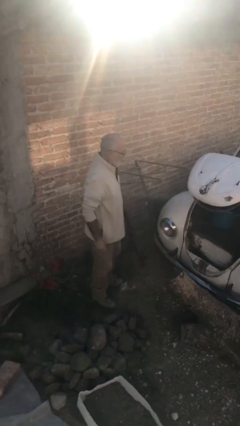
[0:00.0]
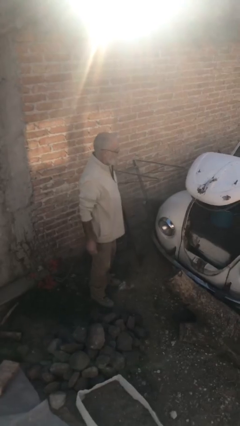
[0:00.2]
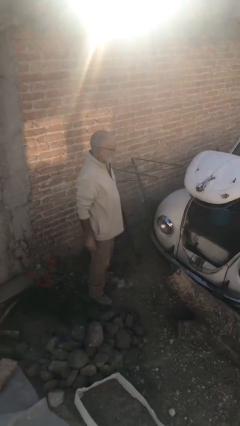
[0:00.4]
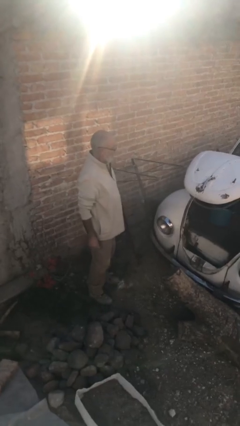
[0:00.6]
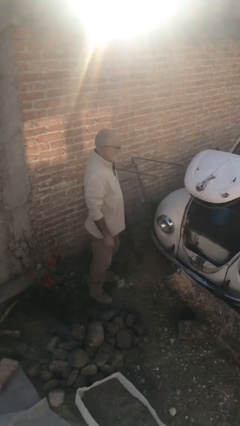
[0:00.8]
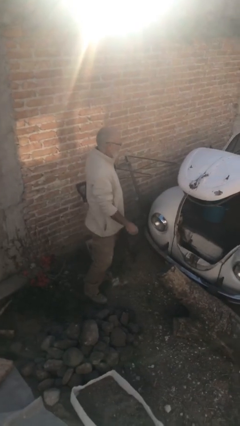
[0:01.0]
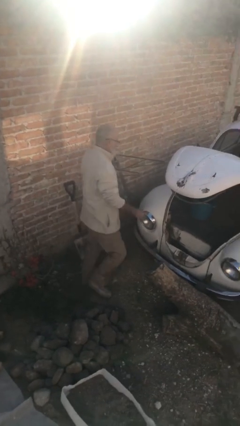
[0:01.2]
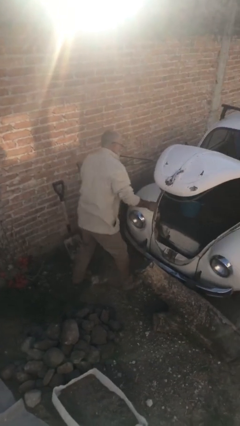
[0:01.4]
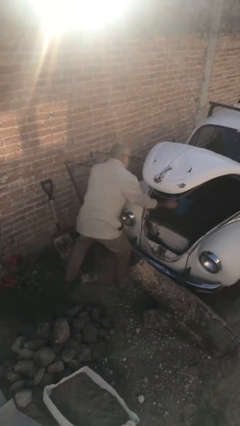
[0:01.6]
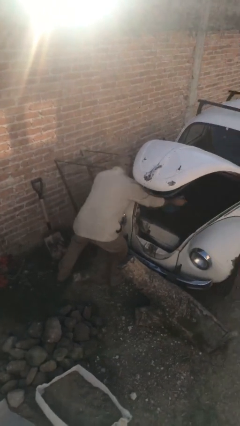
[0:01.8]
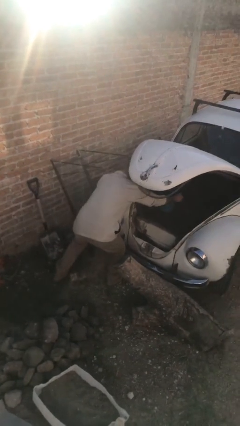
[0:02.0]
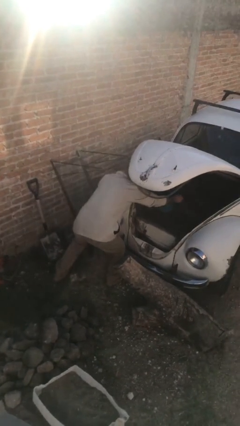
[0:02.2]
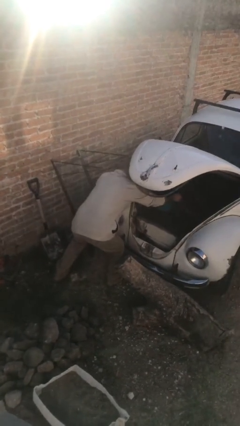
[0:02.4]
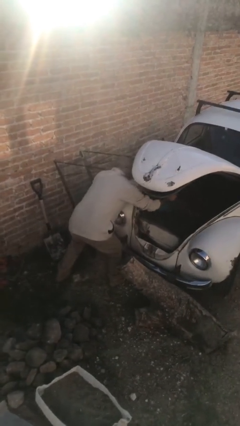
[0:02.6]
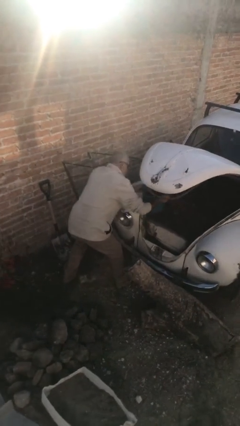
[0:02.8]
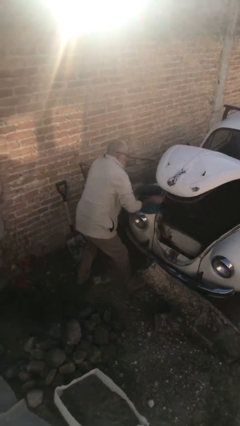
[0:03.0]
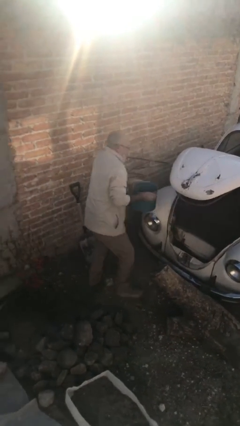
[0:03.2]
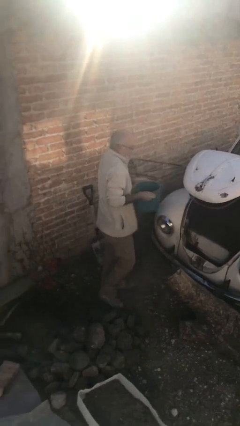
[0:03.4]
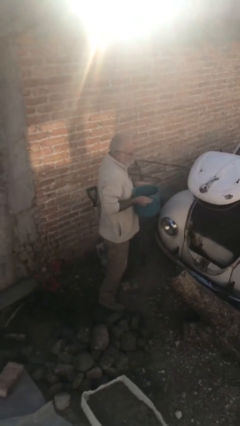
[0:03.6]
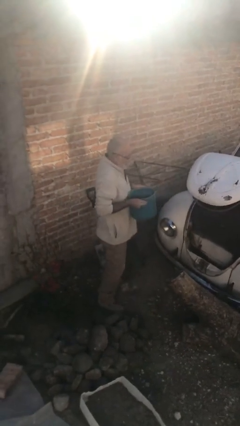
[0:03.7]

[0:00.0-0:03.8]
person unloads car

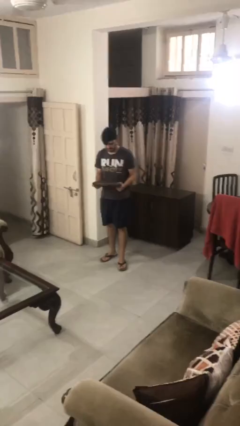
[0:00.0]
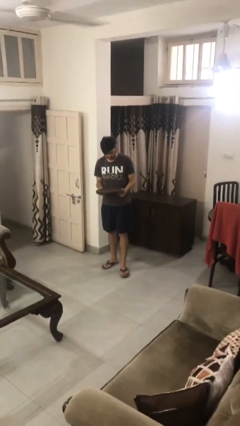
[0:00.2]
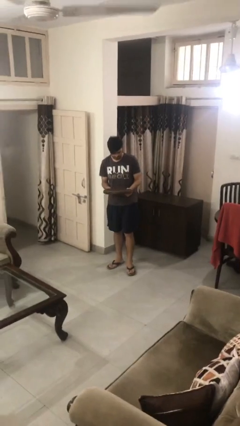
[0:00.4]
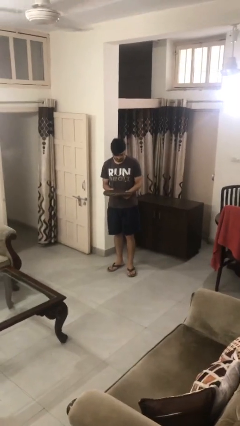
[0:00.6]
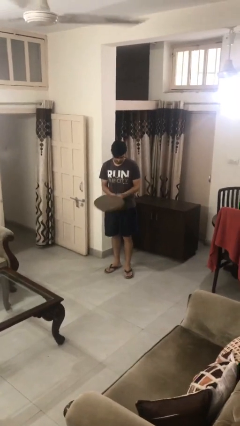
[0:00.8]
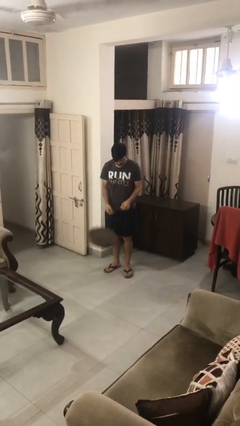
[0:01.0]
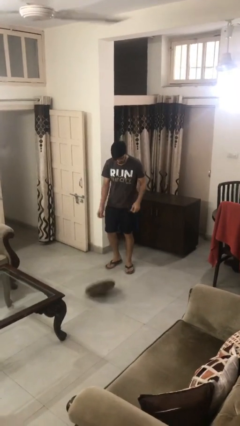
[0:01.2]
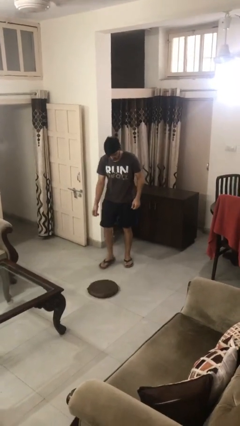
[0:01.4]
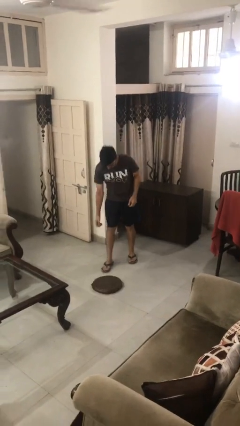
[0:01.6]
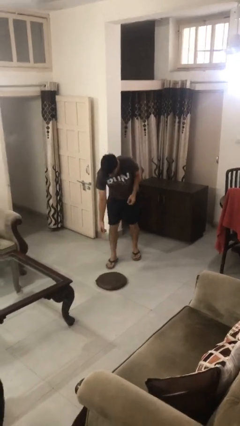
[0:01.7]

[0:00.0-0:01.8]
person drops object

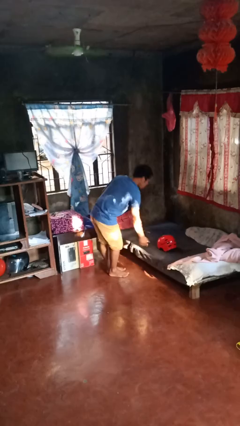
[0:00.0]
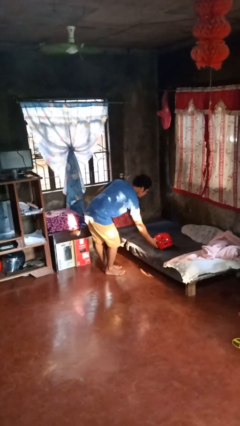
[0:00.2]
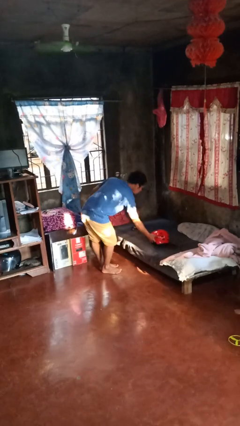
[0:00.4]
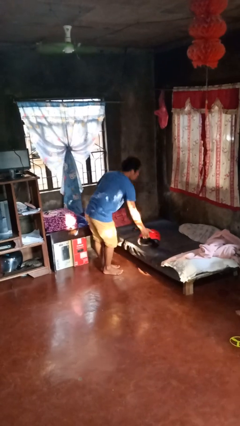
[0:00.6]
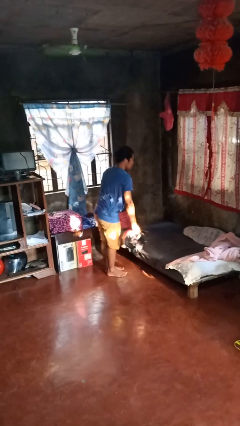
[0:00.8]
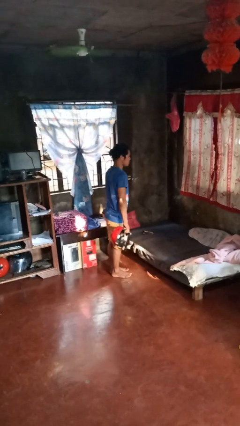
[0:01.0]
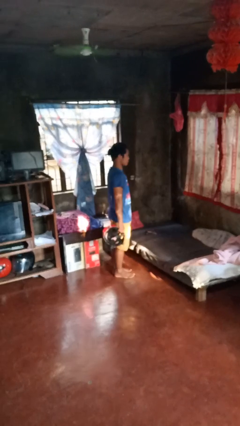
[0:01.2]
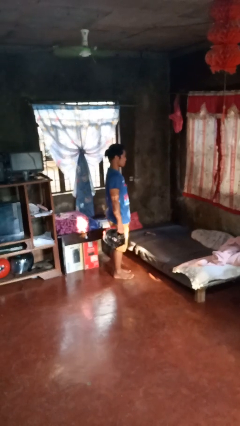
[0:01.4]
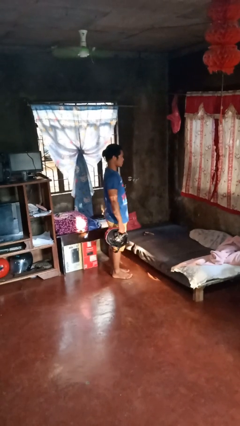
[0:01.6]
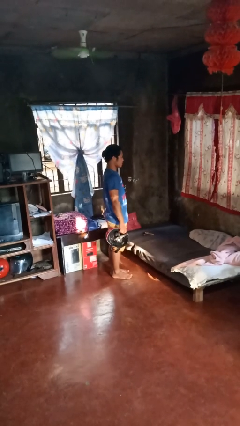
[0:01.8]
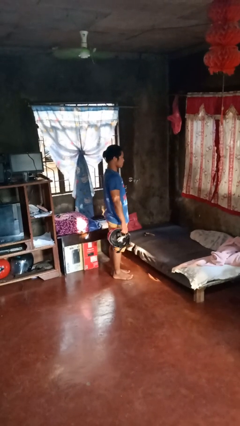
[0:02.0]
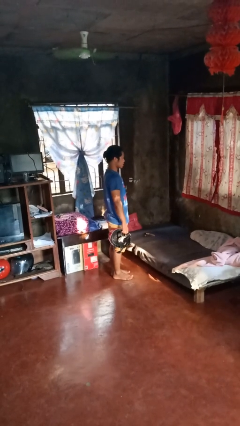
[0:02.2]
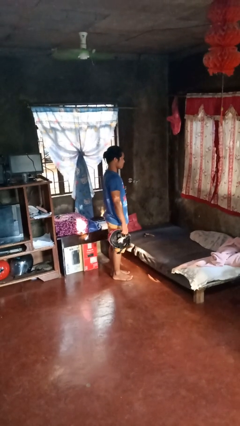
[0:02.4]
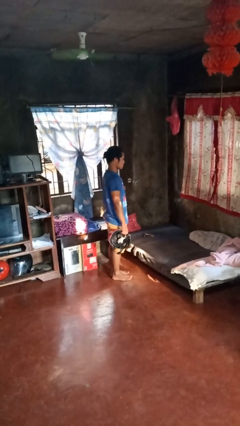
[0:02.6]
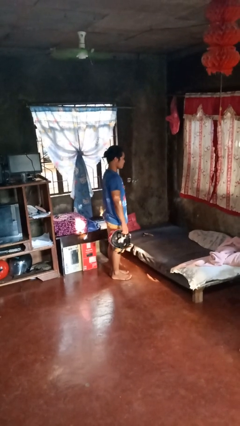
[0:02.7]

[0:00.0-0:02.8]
person picks up object from bed

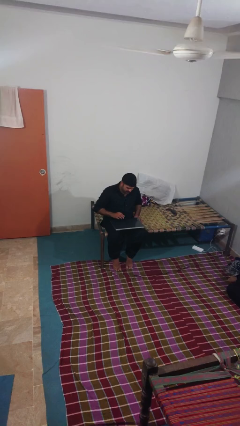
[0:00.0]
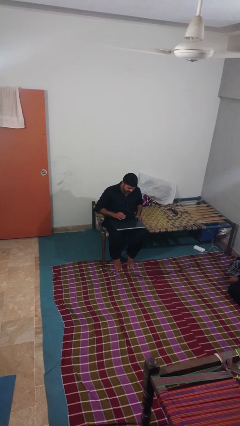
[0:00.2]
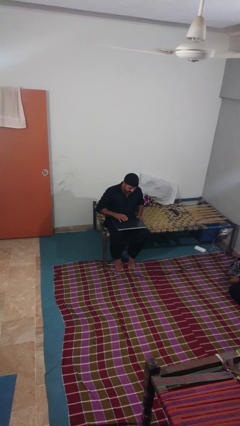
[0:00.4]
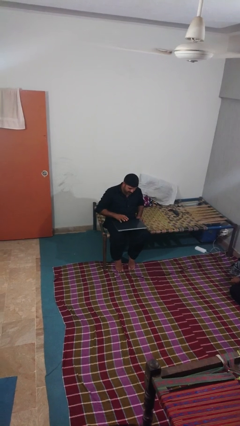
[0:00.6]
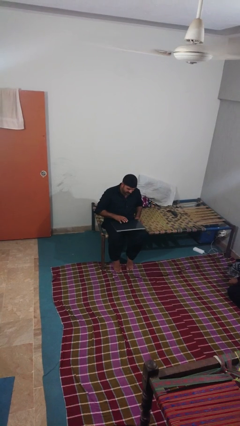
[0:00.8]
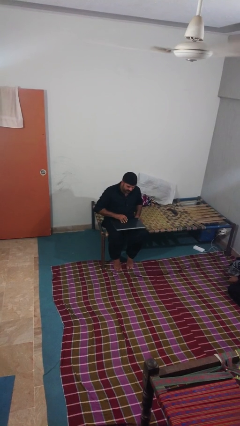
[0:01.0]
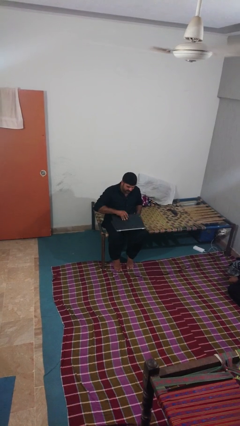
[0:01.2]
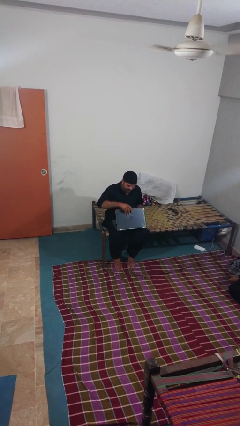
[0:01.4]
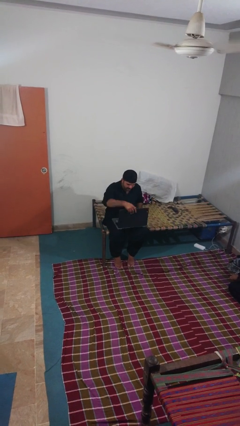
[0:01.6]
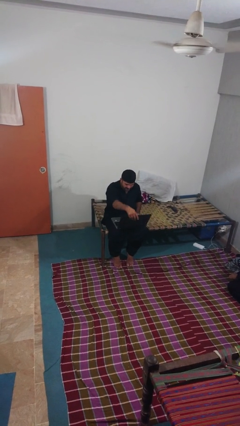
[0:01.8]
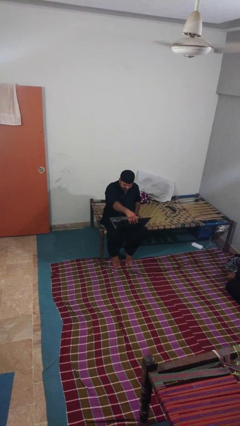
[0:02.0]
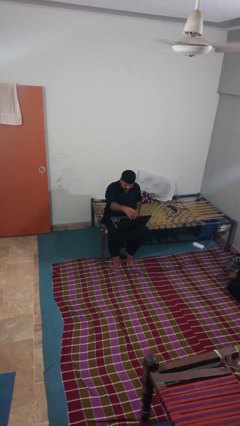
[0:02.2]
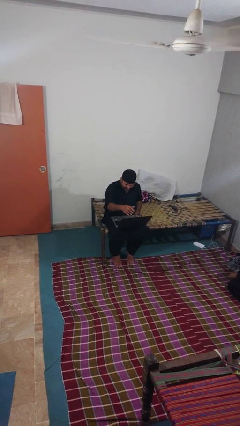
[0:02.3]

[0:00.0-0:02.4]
person opens laptop

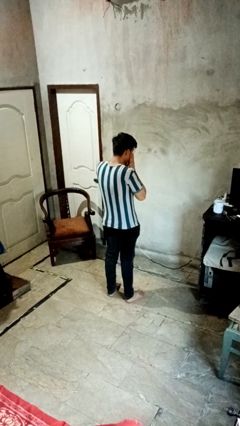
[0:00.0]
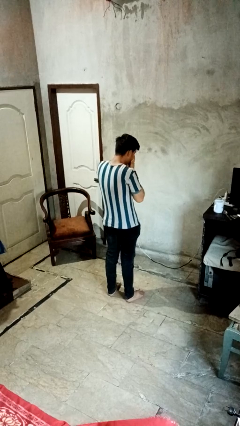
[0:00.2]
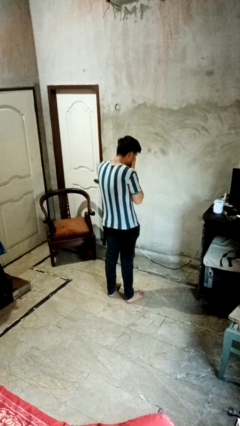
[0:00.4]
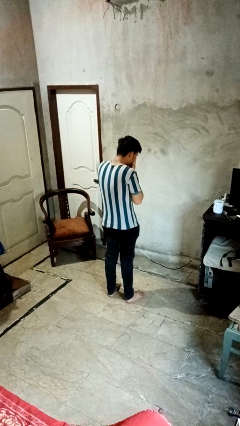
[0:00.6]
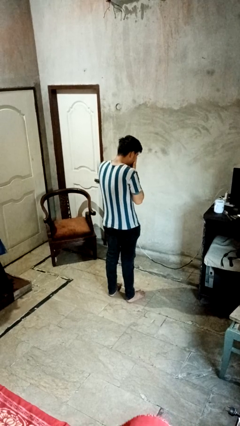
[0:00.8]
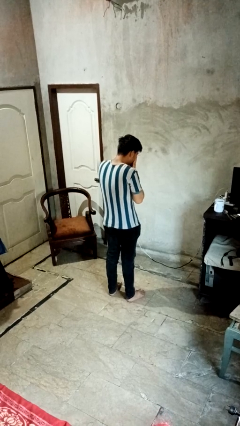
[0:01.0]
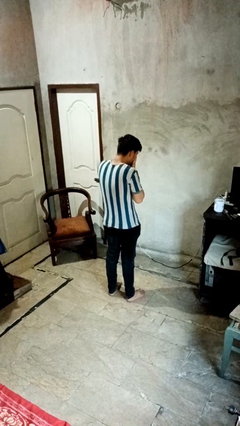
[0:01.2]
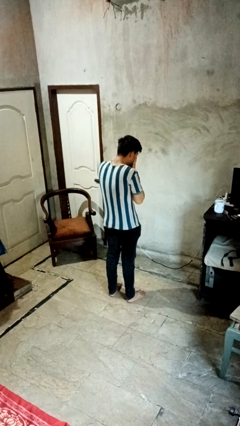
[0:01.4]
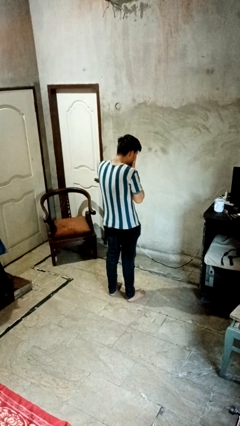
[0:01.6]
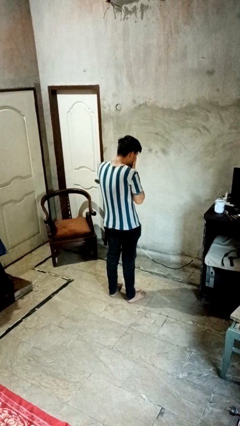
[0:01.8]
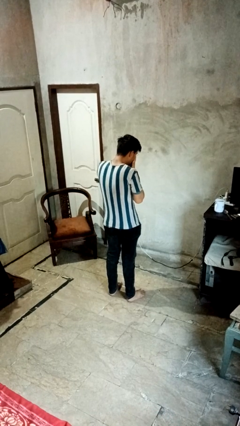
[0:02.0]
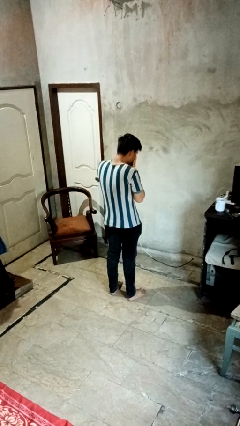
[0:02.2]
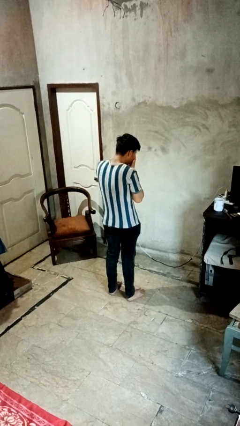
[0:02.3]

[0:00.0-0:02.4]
person blows nose

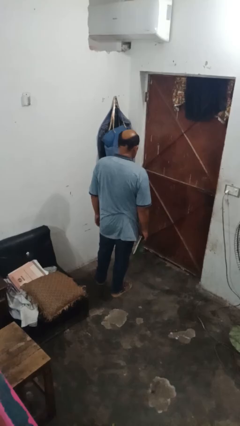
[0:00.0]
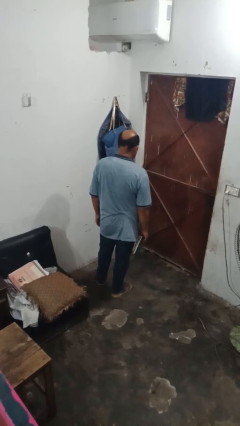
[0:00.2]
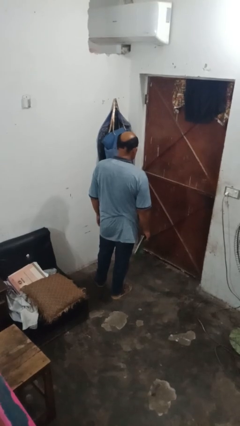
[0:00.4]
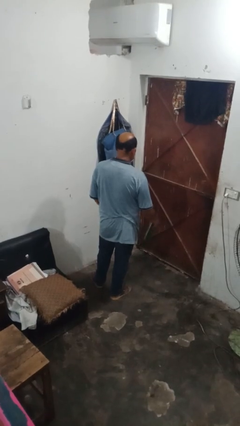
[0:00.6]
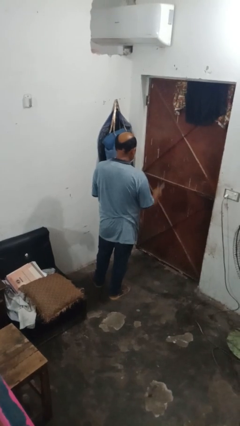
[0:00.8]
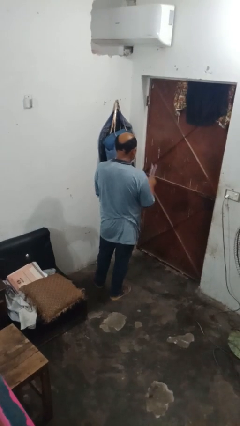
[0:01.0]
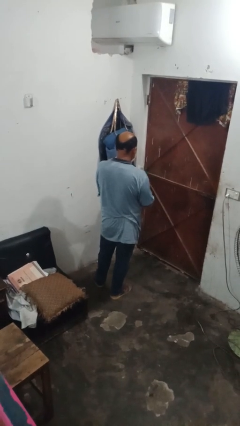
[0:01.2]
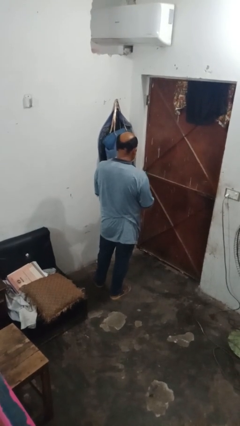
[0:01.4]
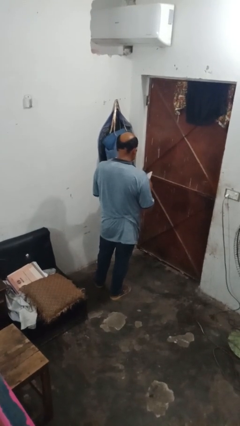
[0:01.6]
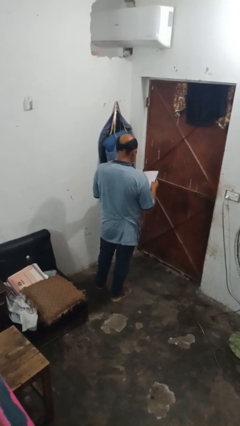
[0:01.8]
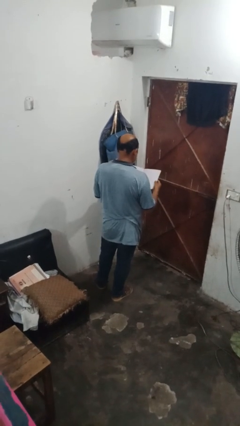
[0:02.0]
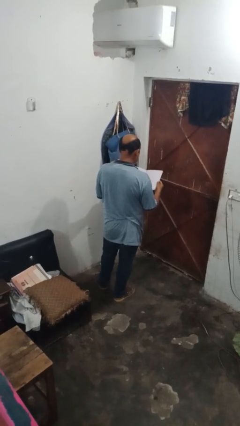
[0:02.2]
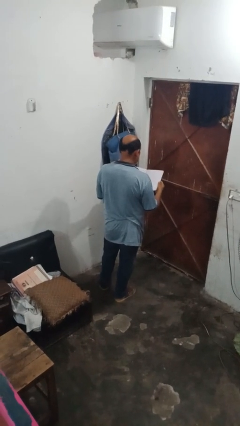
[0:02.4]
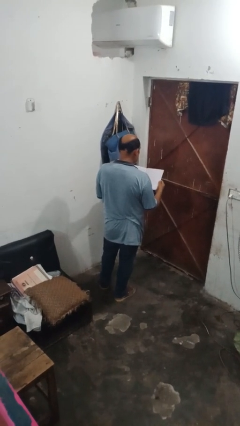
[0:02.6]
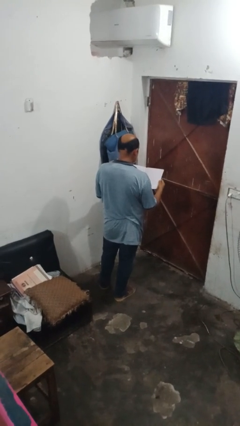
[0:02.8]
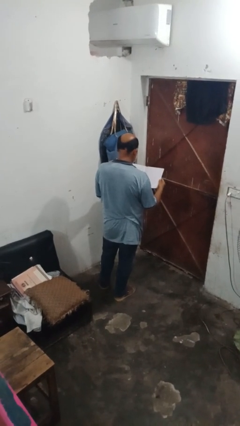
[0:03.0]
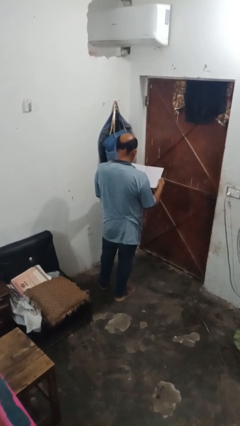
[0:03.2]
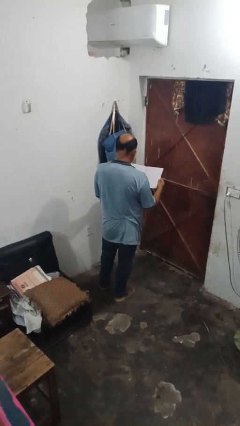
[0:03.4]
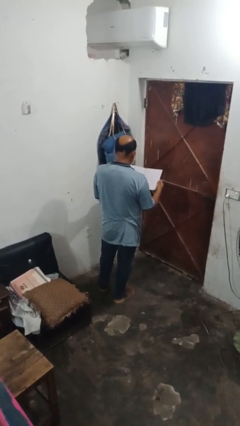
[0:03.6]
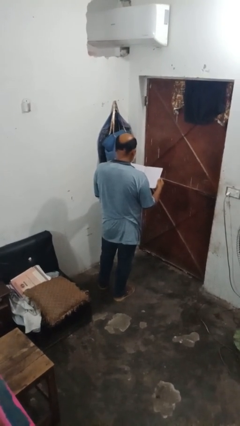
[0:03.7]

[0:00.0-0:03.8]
person reads book

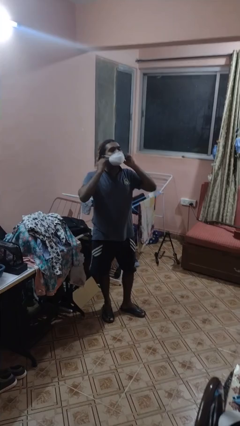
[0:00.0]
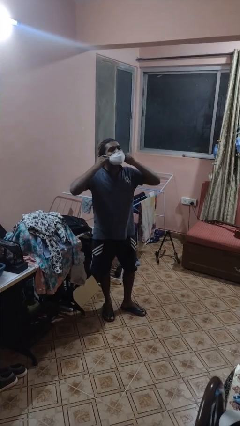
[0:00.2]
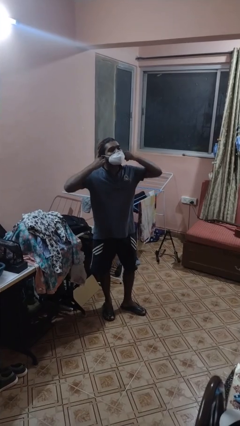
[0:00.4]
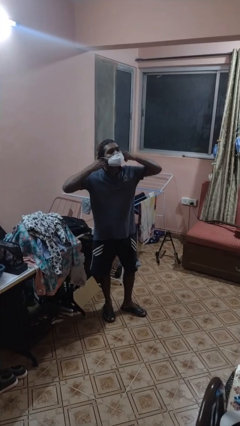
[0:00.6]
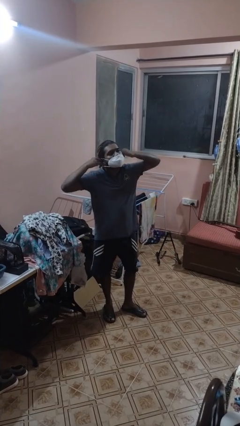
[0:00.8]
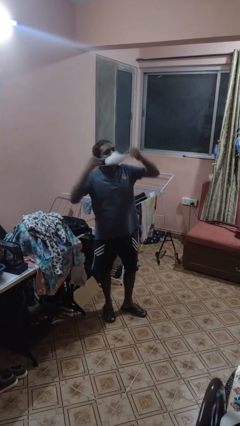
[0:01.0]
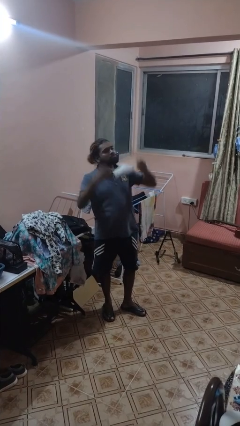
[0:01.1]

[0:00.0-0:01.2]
person takes off facemask
